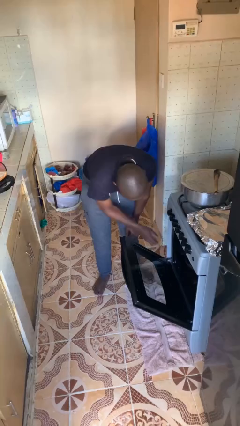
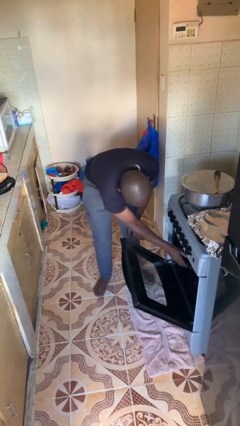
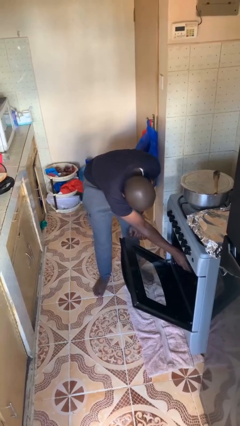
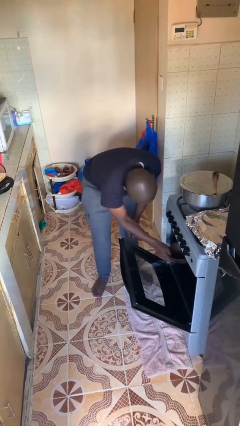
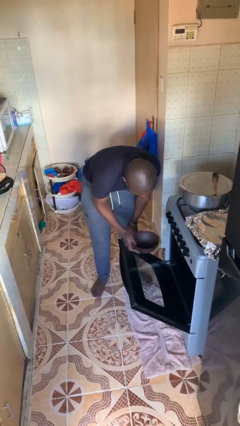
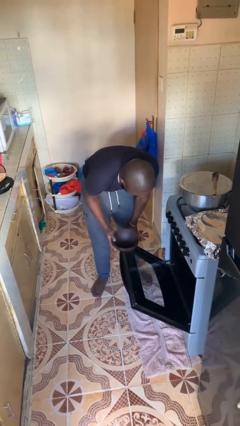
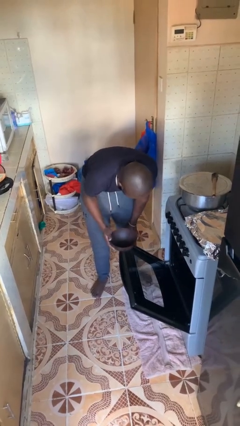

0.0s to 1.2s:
person takes object from oven

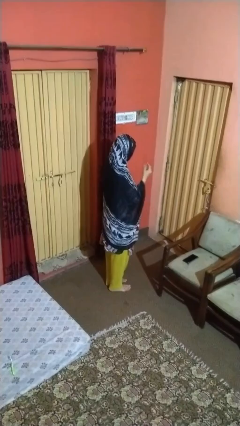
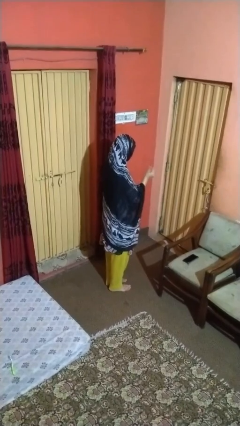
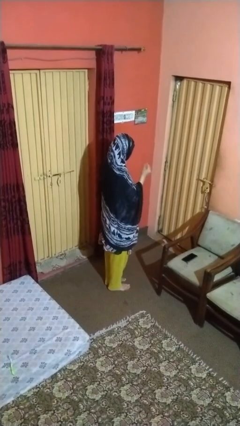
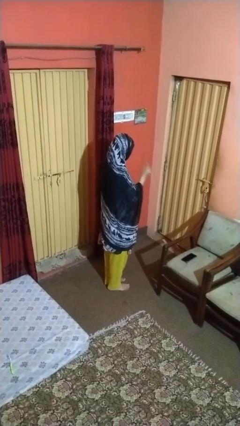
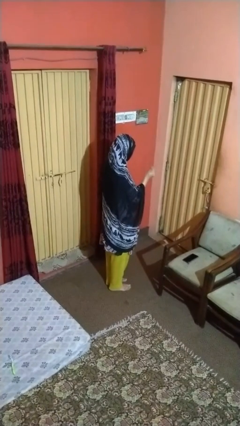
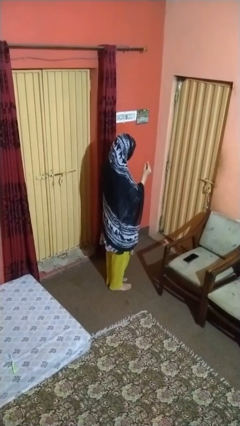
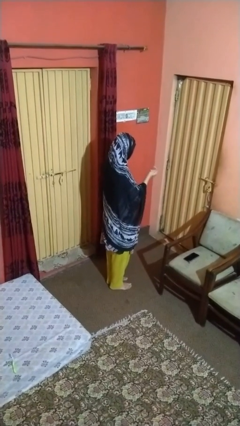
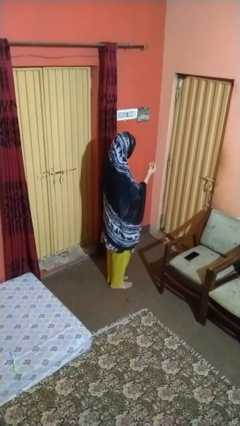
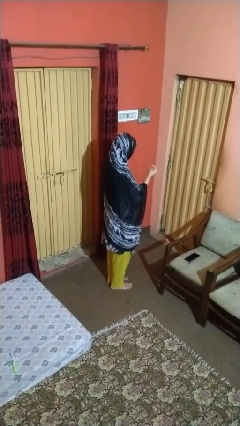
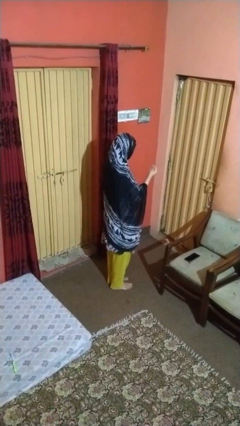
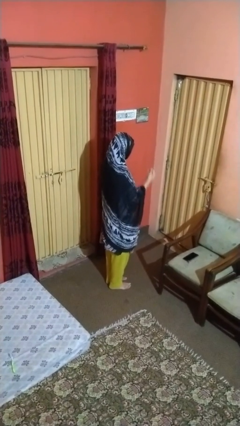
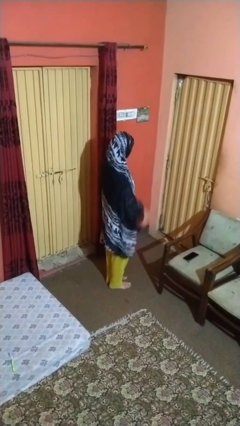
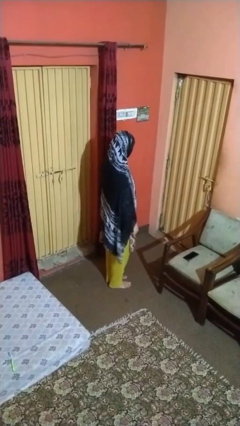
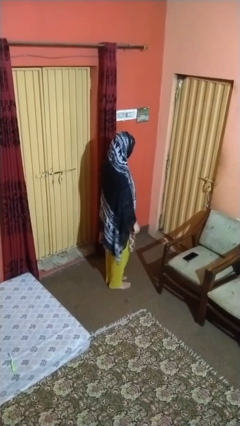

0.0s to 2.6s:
person snaps fingers

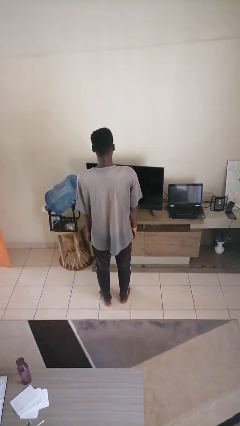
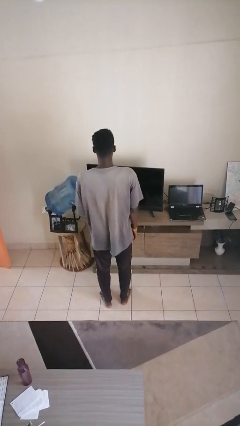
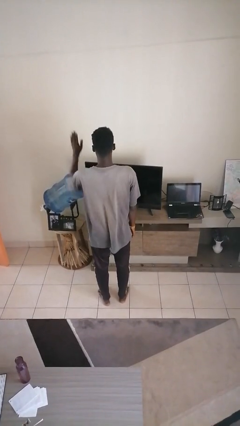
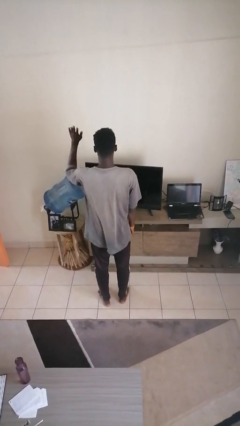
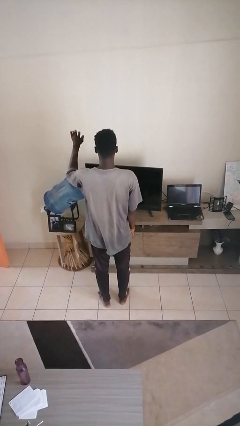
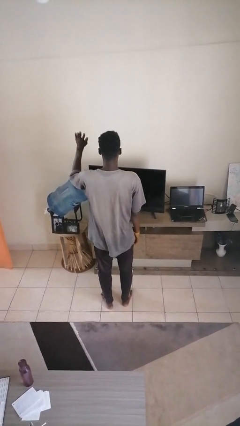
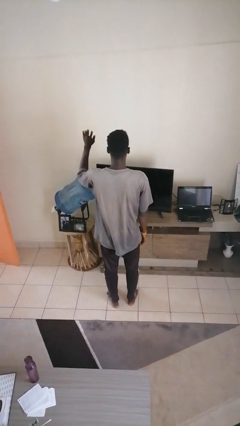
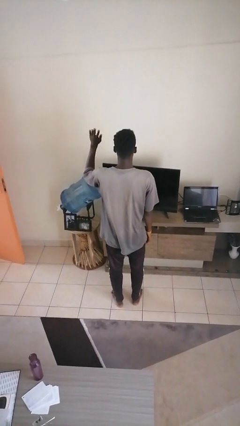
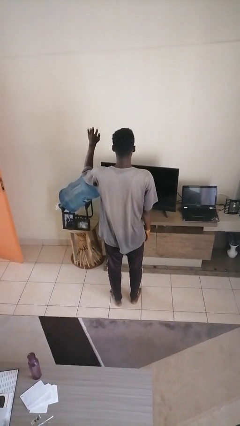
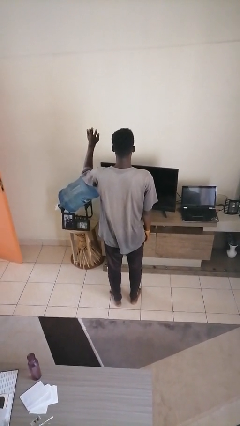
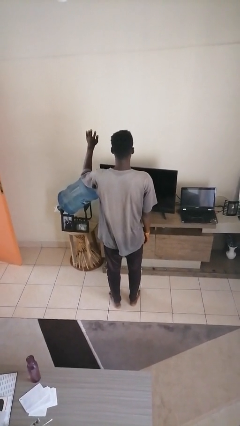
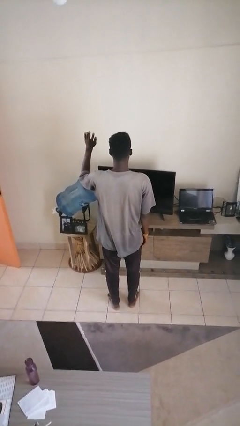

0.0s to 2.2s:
person gestures raise hand

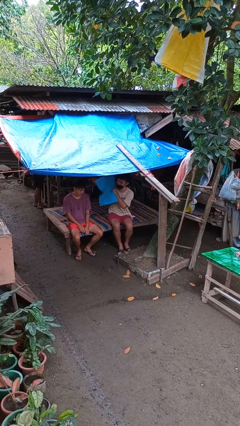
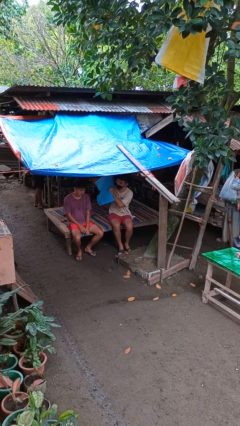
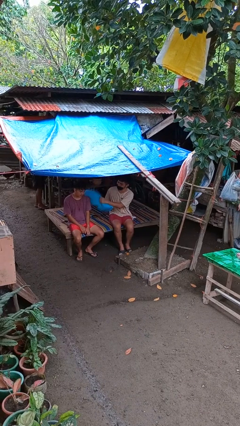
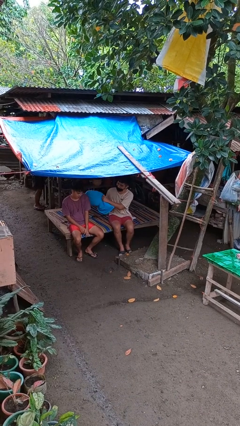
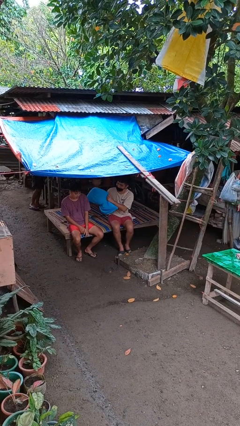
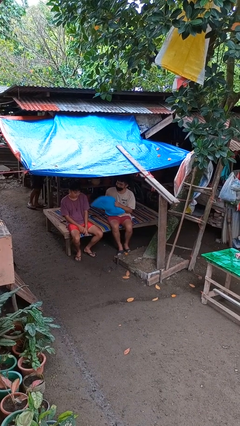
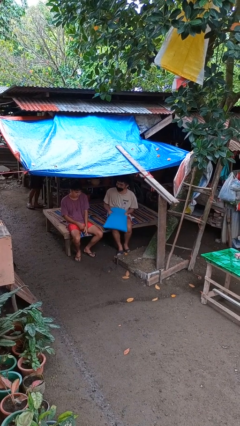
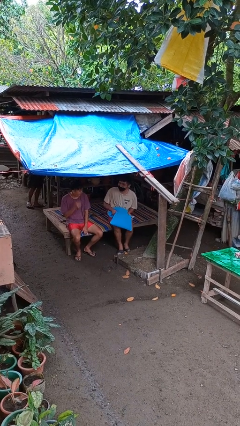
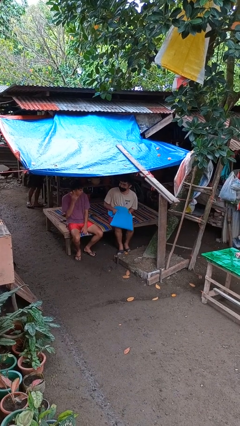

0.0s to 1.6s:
person hits person with pillow

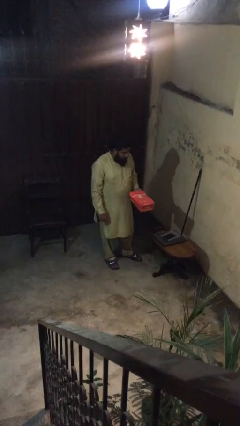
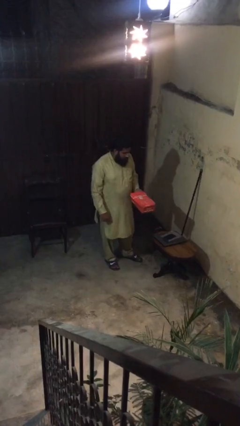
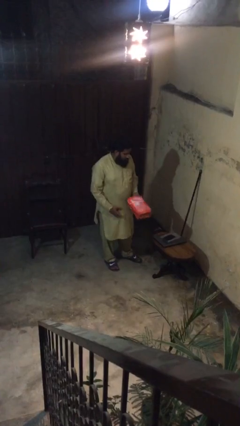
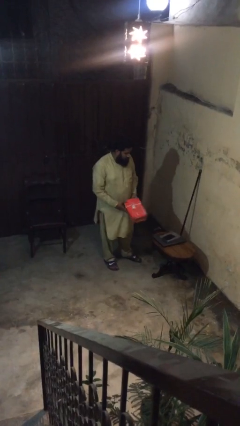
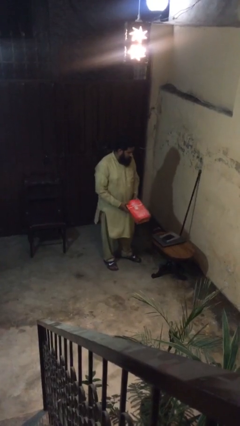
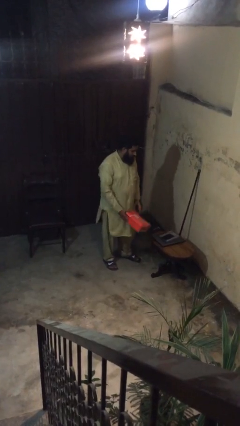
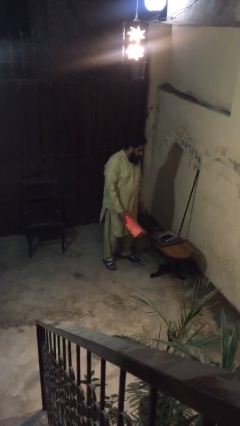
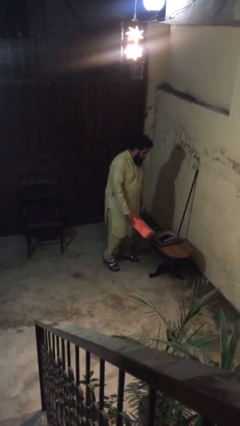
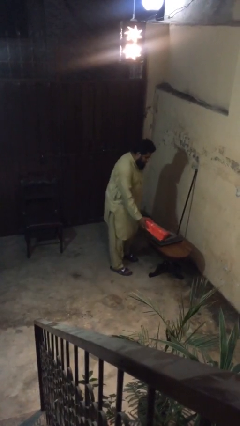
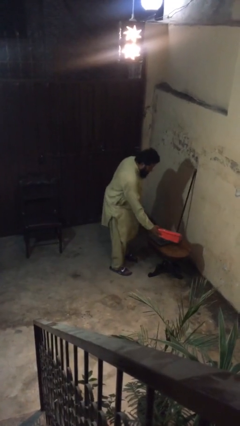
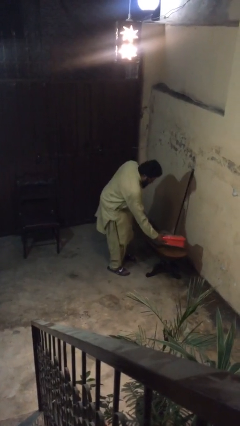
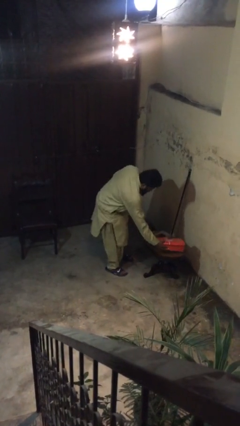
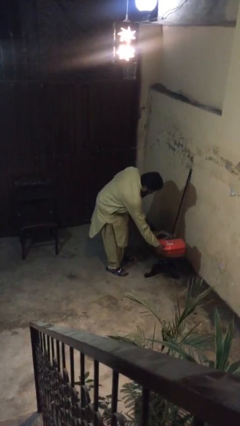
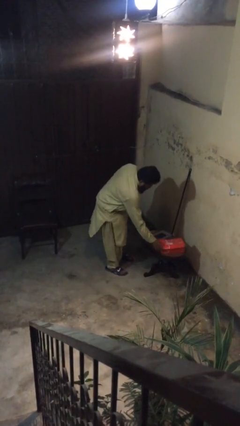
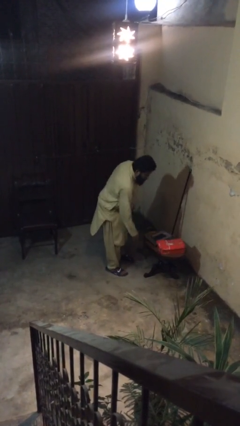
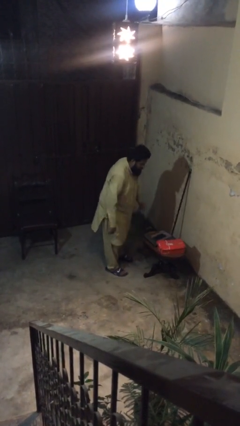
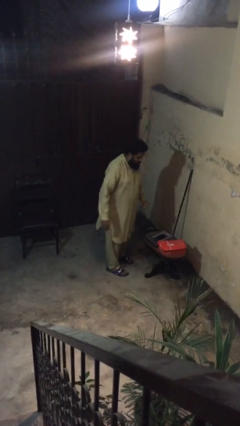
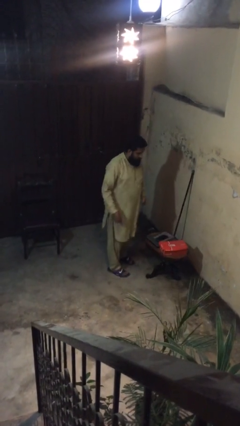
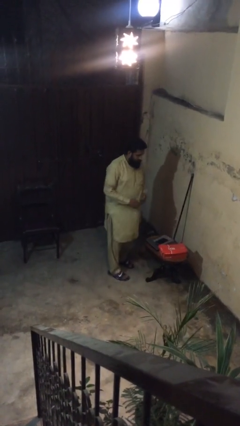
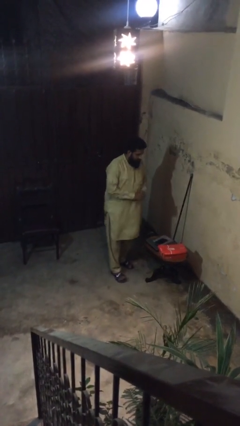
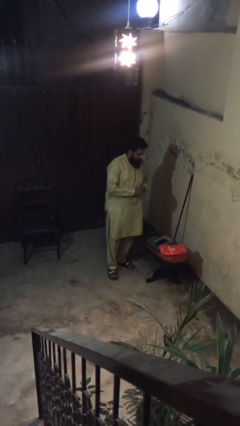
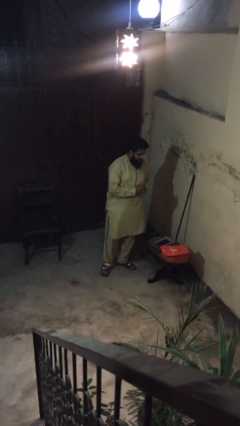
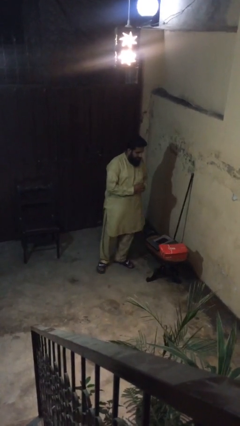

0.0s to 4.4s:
person puts down object on table

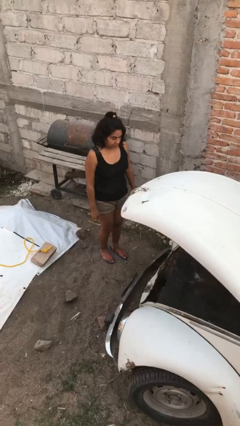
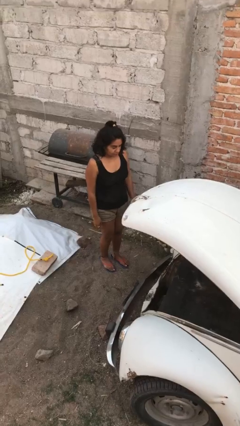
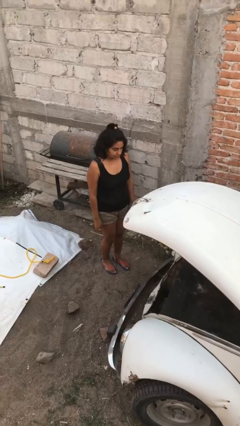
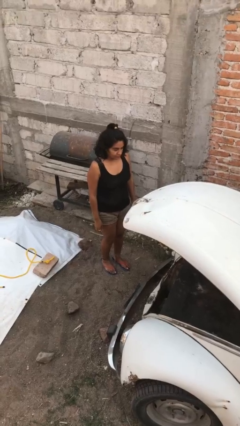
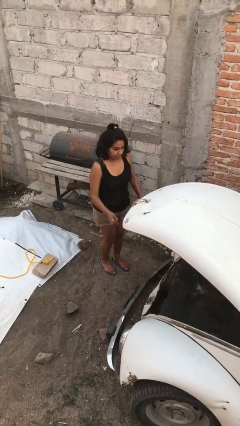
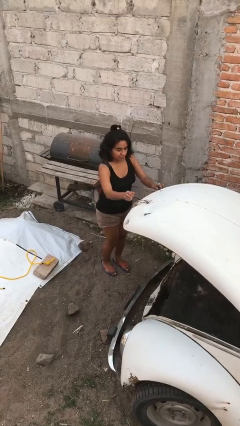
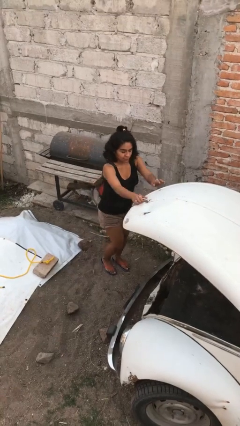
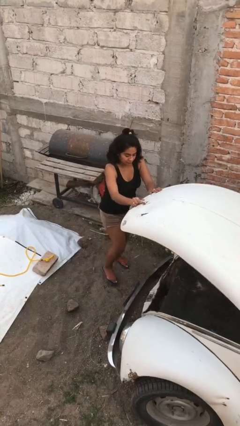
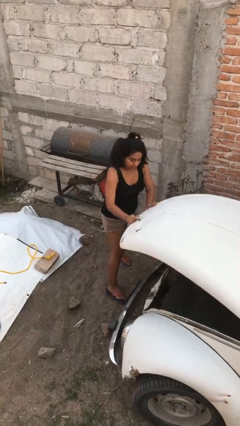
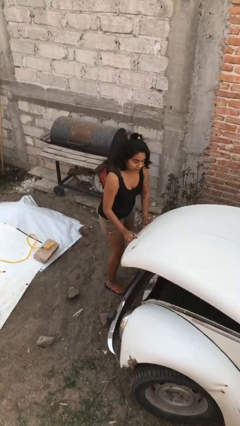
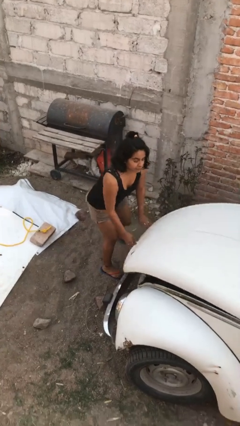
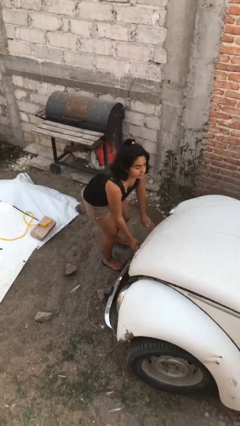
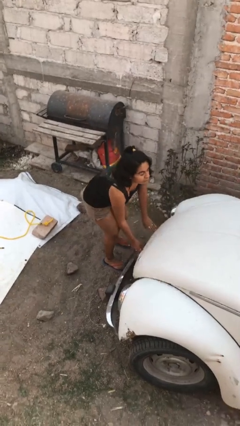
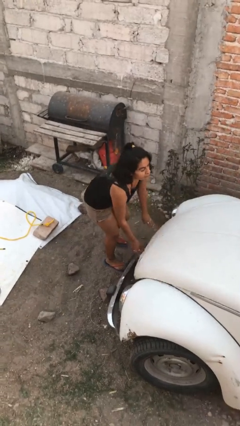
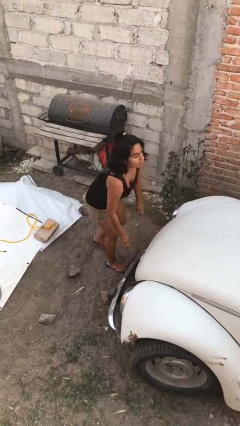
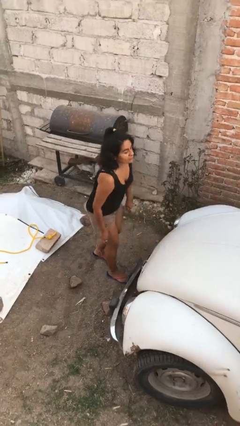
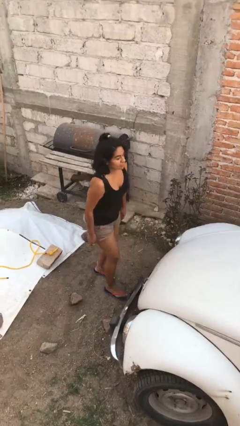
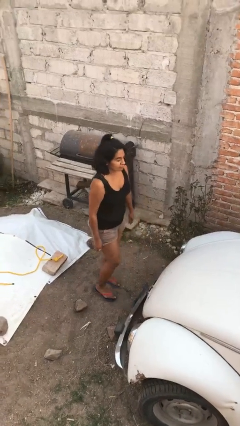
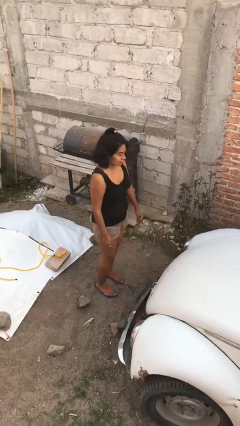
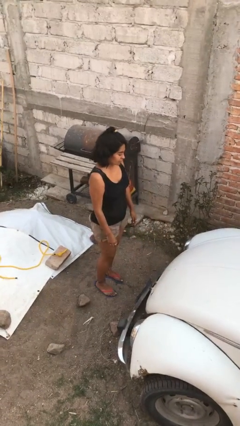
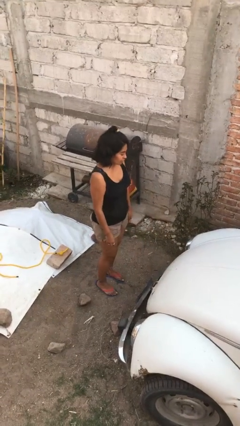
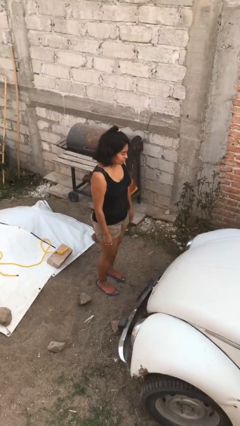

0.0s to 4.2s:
person closes car trunk

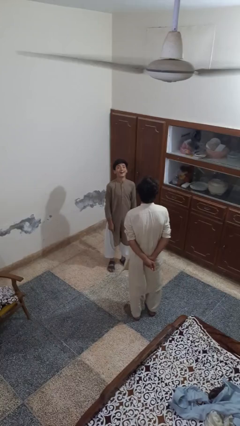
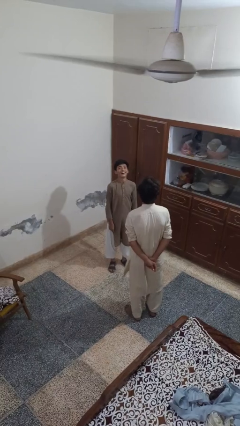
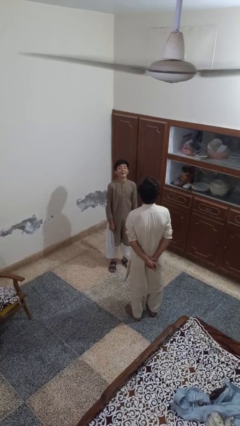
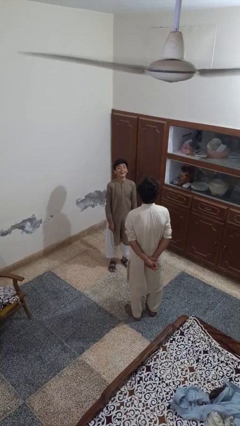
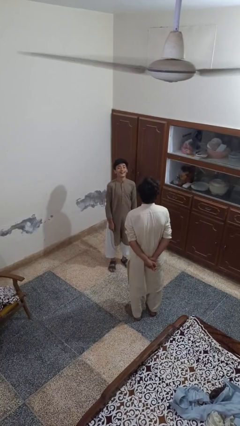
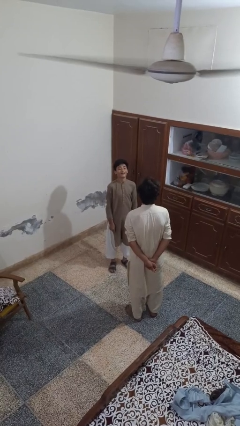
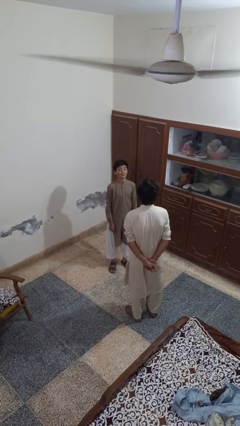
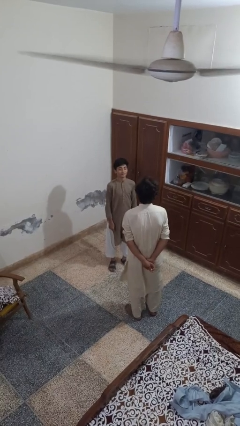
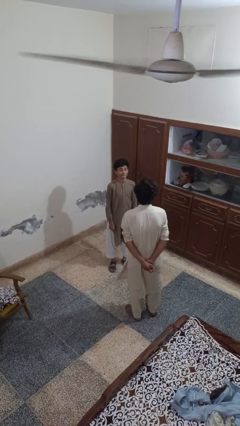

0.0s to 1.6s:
person laughs with person
